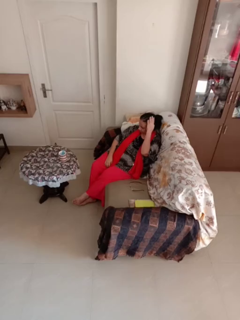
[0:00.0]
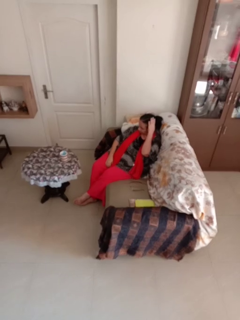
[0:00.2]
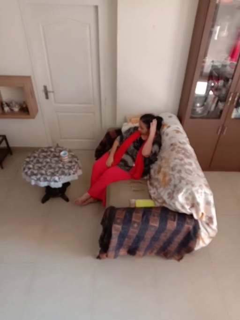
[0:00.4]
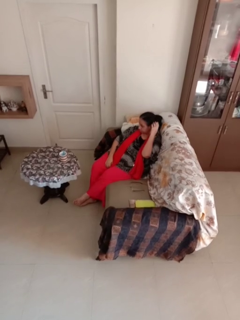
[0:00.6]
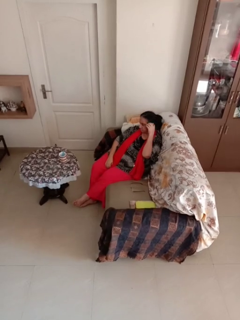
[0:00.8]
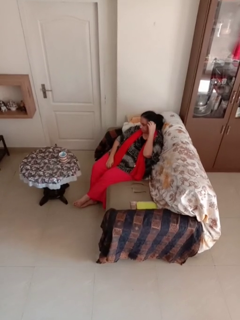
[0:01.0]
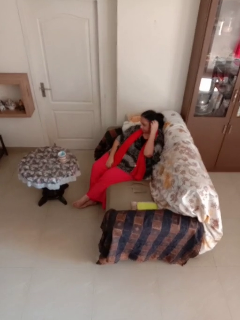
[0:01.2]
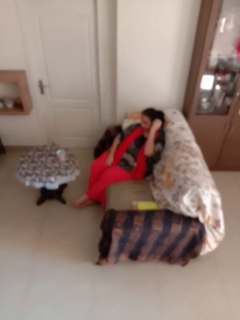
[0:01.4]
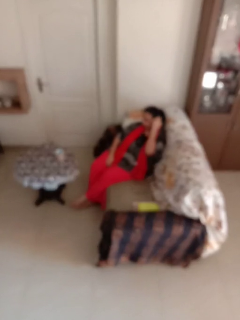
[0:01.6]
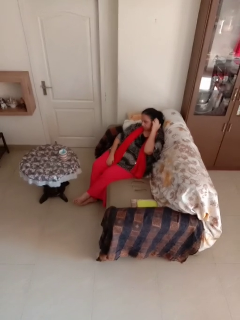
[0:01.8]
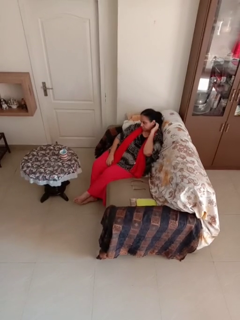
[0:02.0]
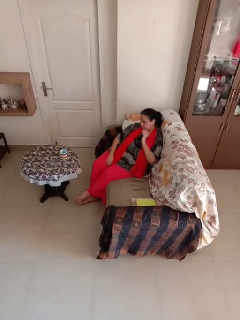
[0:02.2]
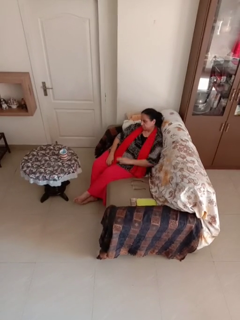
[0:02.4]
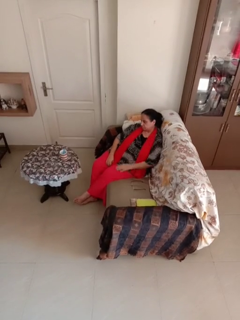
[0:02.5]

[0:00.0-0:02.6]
person strokes hair

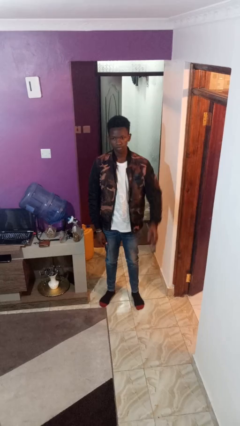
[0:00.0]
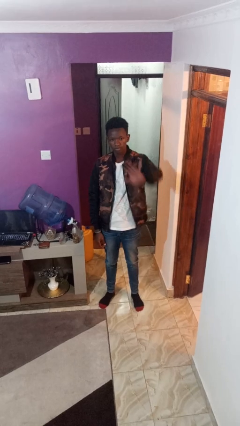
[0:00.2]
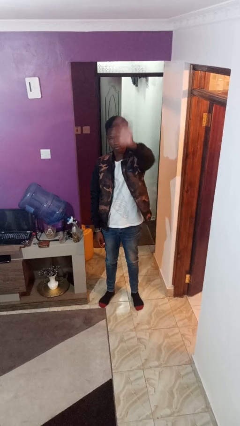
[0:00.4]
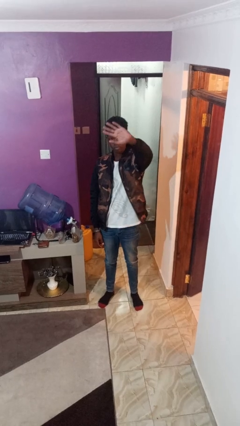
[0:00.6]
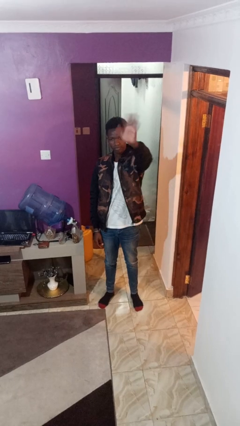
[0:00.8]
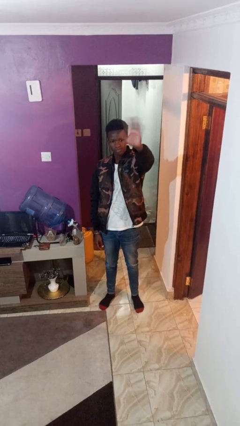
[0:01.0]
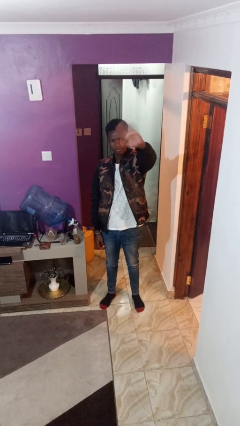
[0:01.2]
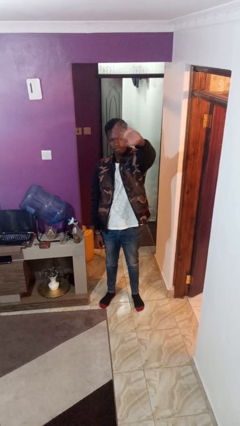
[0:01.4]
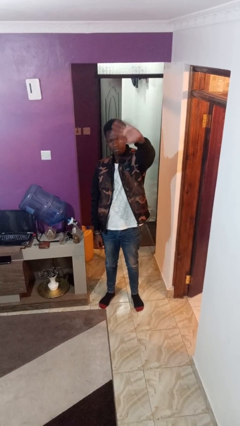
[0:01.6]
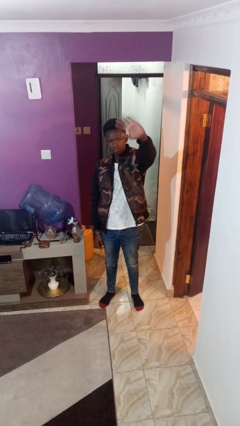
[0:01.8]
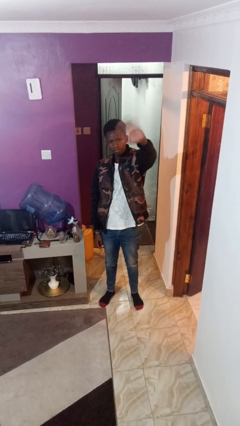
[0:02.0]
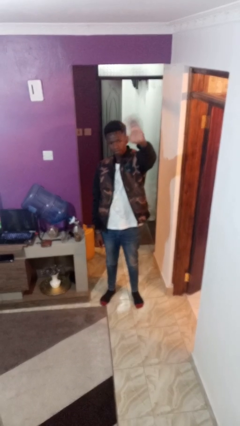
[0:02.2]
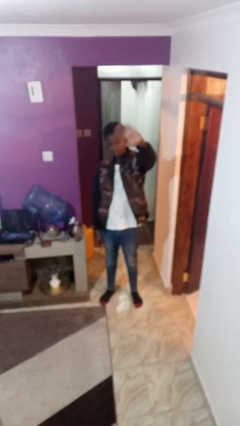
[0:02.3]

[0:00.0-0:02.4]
person waves at person

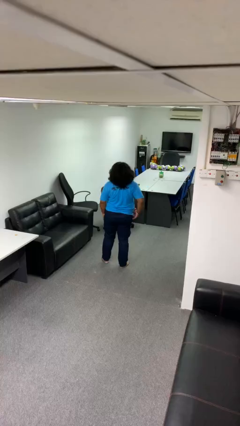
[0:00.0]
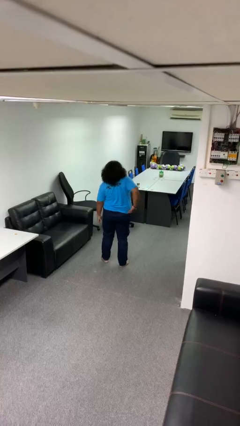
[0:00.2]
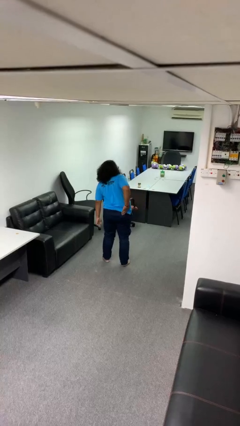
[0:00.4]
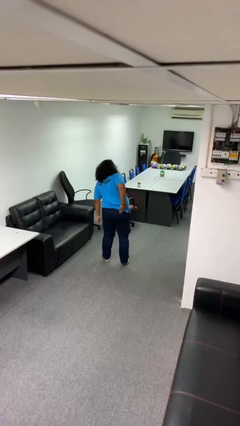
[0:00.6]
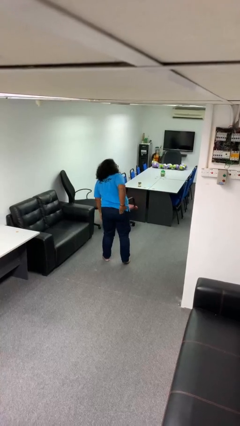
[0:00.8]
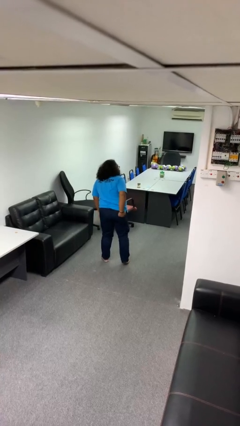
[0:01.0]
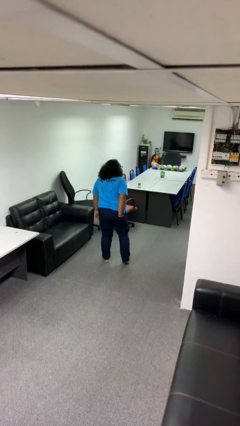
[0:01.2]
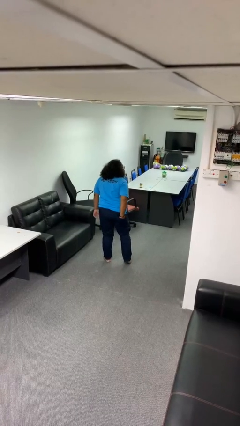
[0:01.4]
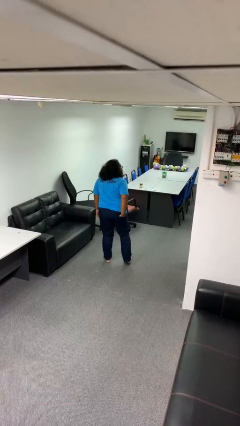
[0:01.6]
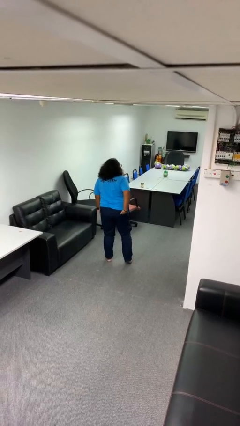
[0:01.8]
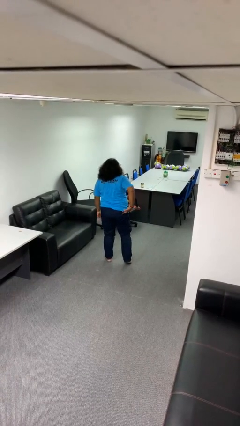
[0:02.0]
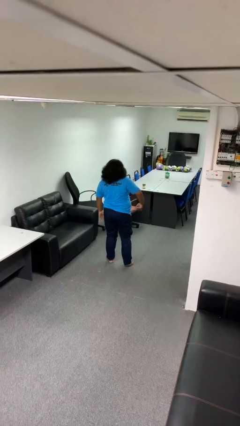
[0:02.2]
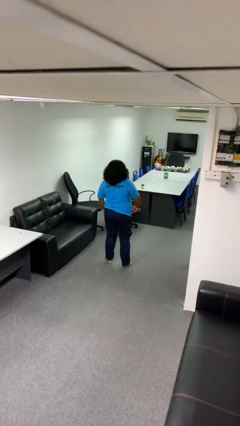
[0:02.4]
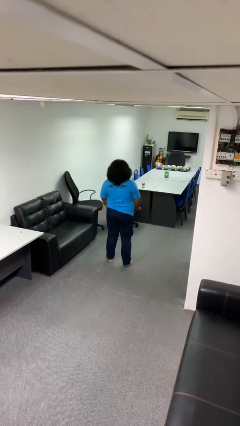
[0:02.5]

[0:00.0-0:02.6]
person puts hands in back pockets

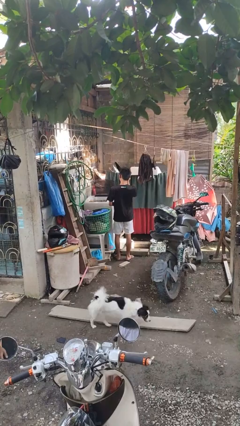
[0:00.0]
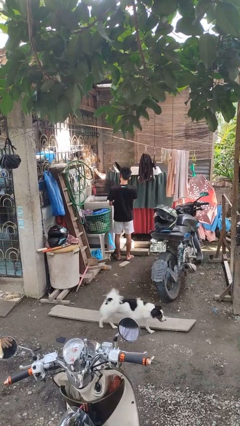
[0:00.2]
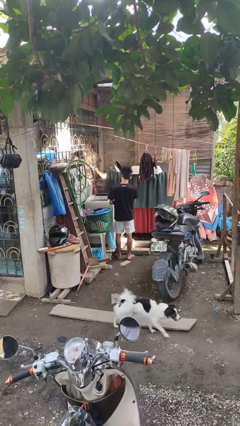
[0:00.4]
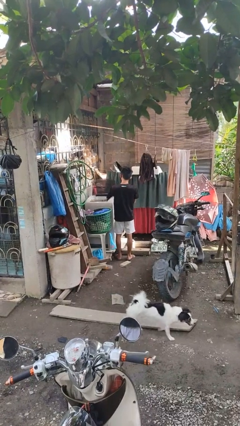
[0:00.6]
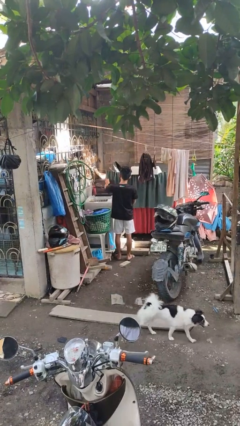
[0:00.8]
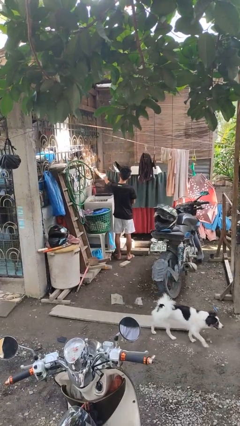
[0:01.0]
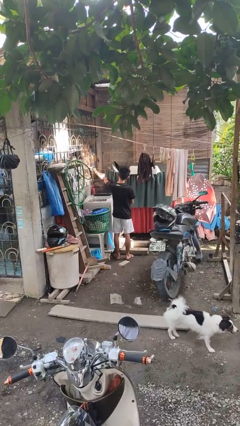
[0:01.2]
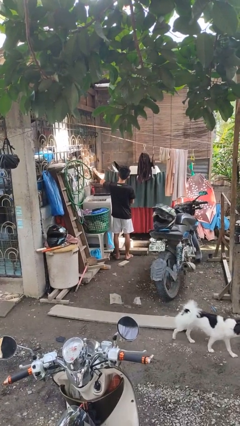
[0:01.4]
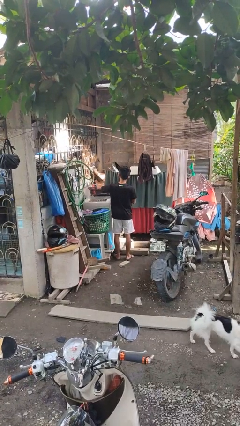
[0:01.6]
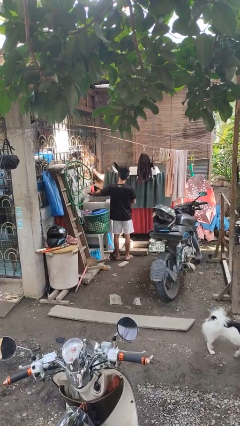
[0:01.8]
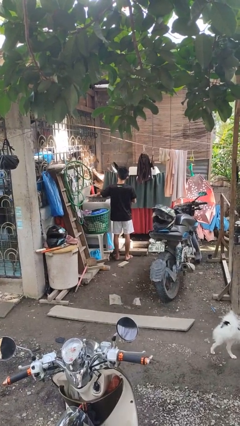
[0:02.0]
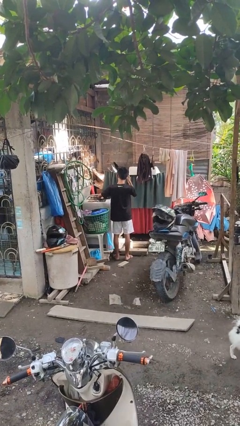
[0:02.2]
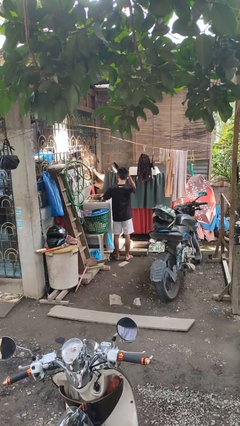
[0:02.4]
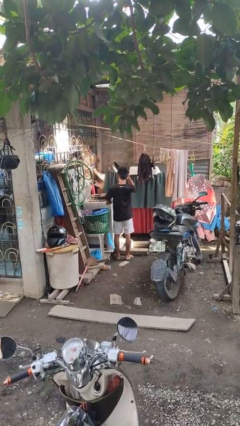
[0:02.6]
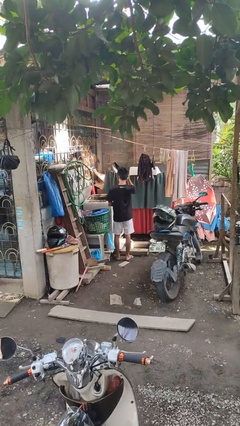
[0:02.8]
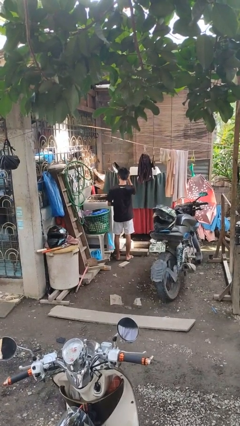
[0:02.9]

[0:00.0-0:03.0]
person closes clothes washer

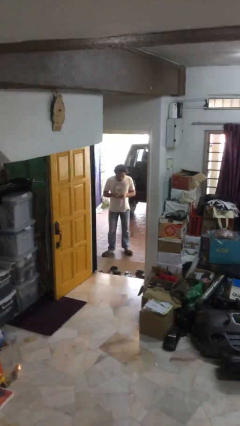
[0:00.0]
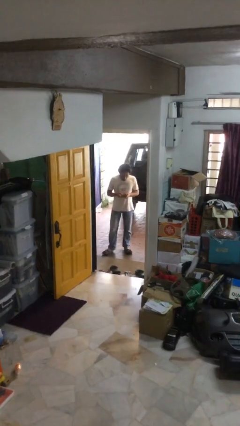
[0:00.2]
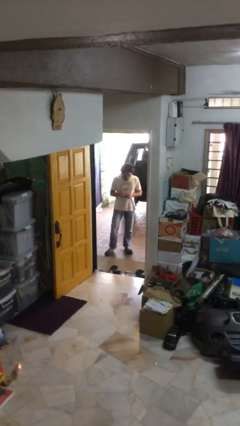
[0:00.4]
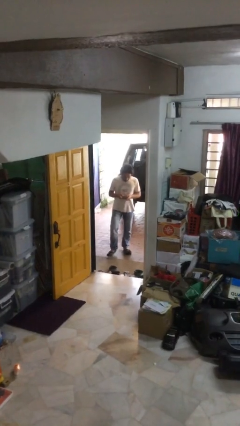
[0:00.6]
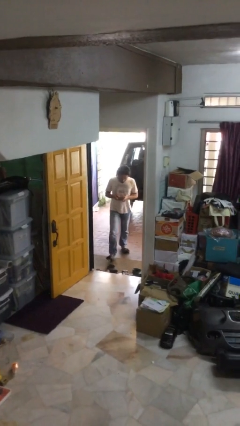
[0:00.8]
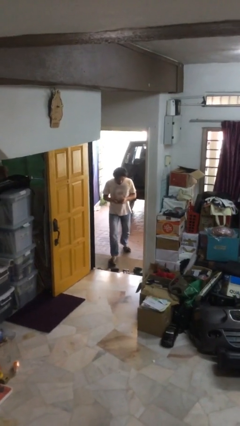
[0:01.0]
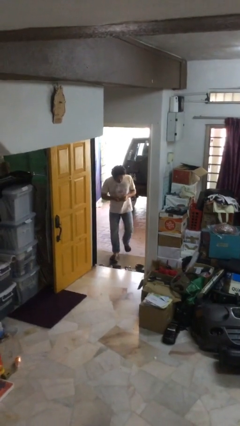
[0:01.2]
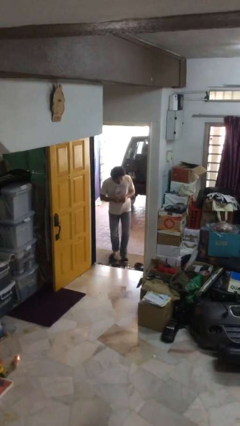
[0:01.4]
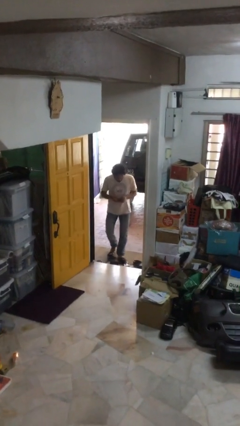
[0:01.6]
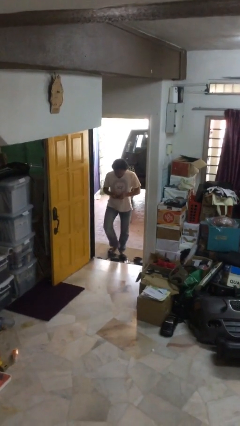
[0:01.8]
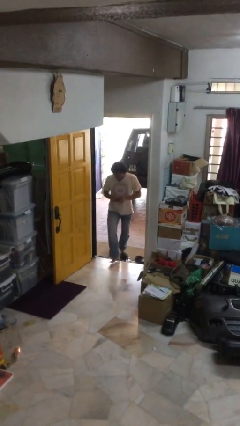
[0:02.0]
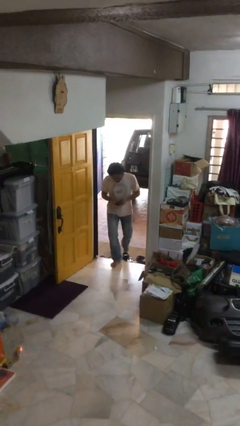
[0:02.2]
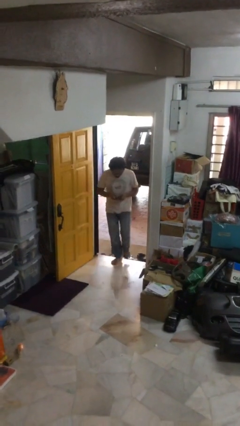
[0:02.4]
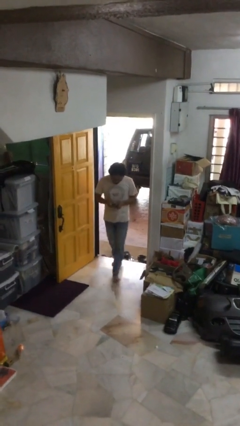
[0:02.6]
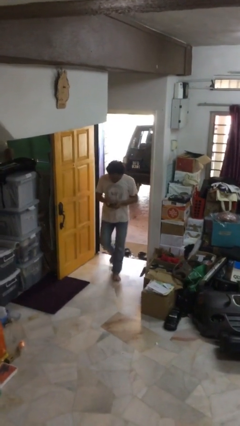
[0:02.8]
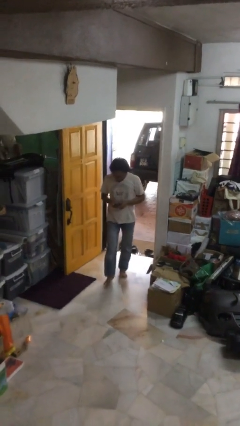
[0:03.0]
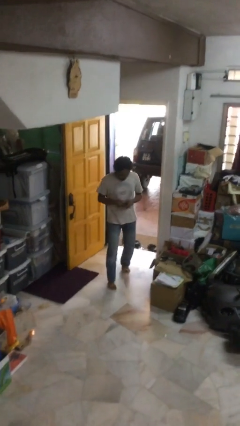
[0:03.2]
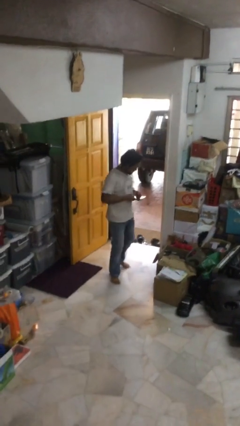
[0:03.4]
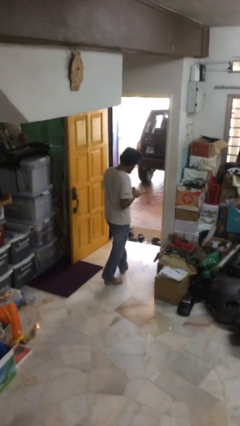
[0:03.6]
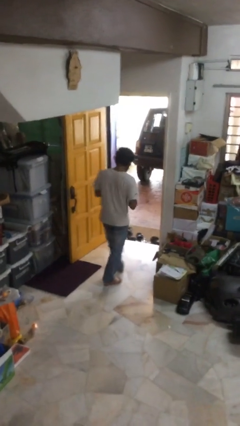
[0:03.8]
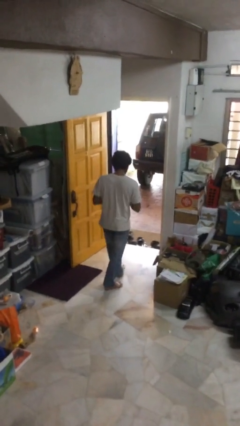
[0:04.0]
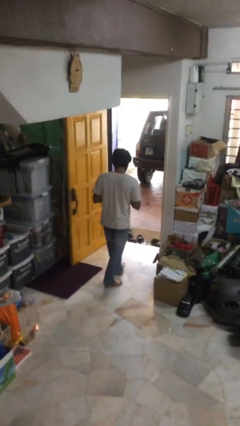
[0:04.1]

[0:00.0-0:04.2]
person enters scene through structure

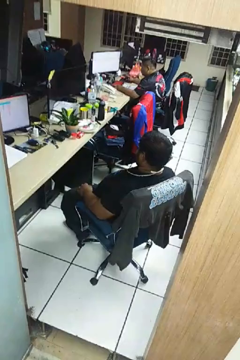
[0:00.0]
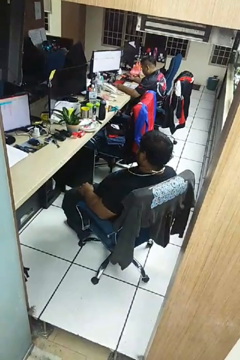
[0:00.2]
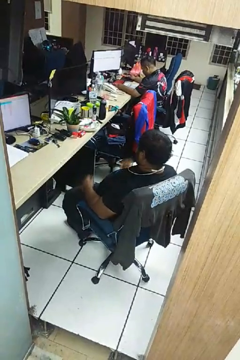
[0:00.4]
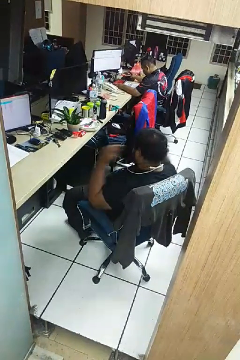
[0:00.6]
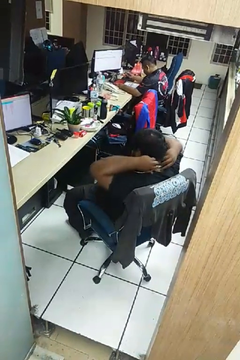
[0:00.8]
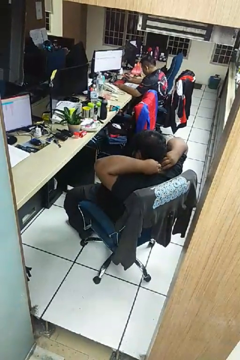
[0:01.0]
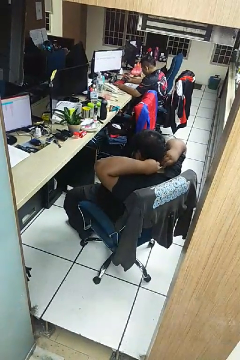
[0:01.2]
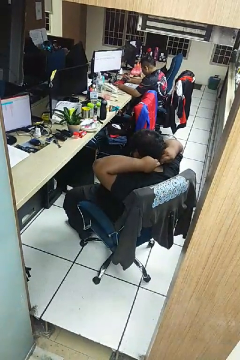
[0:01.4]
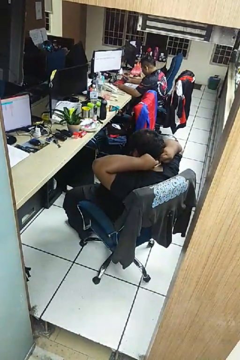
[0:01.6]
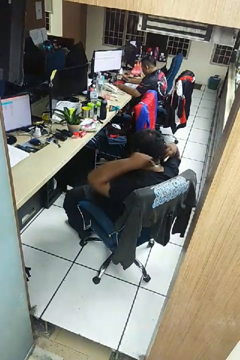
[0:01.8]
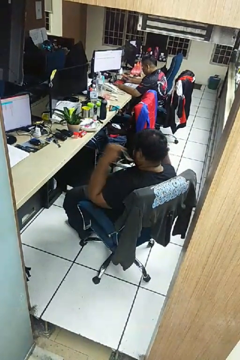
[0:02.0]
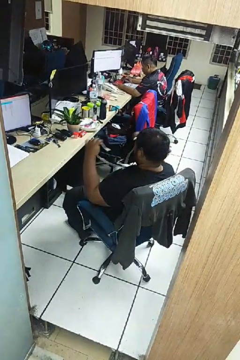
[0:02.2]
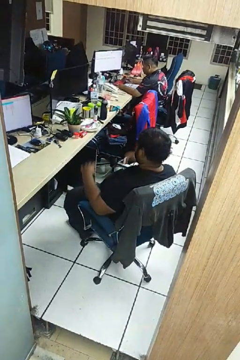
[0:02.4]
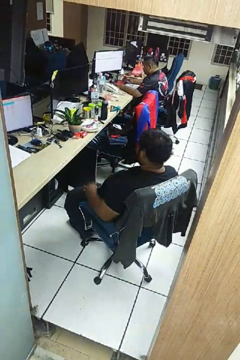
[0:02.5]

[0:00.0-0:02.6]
person takes off necklace

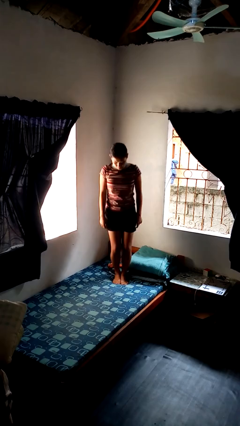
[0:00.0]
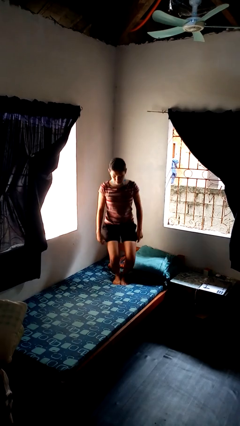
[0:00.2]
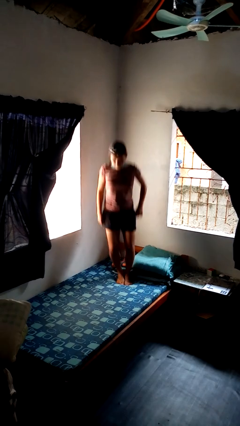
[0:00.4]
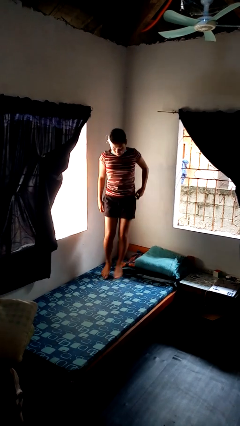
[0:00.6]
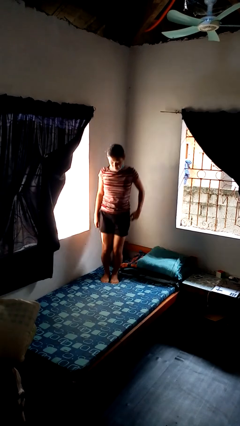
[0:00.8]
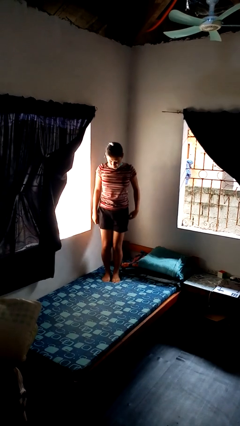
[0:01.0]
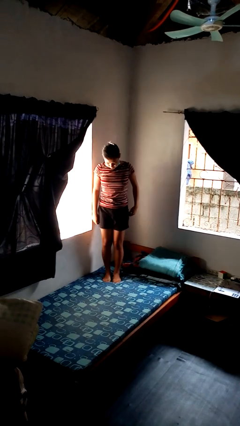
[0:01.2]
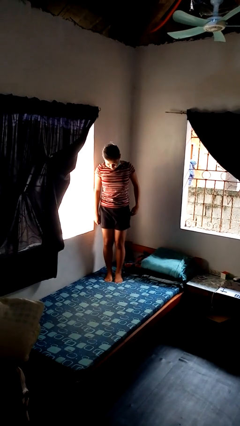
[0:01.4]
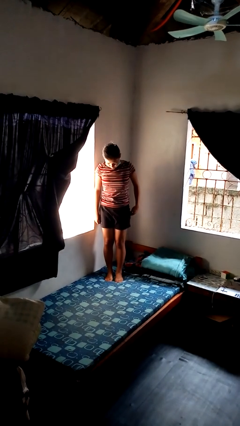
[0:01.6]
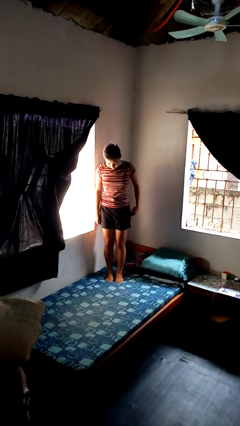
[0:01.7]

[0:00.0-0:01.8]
person jumps on bed
